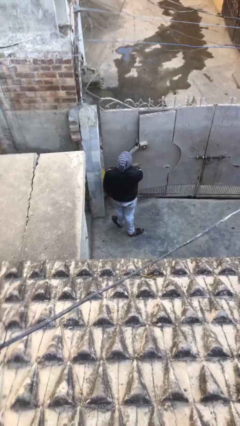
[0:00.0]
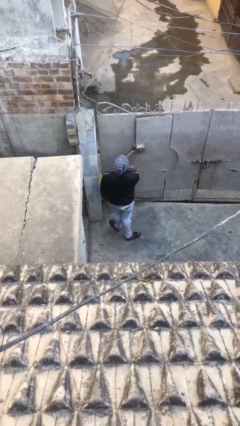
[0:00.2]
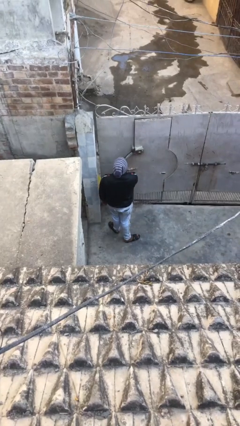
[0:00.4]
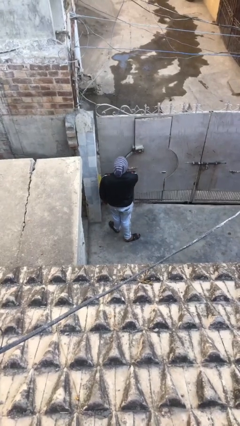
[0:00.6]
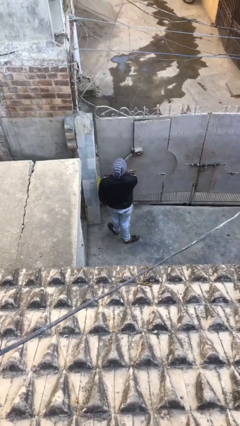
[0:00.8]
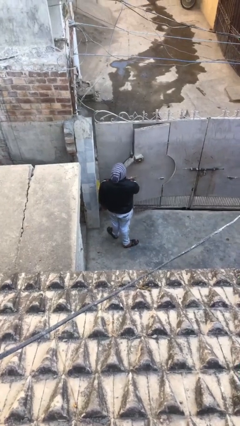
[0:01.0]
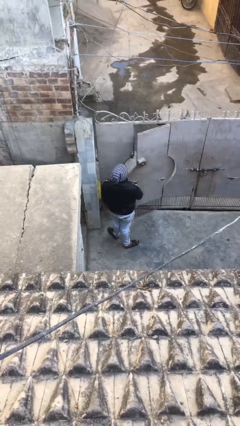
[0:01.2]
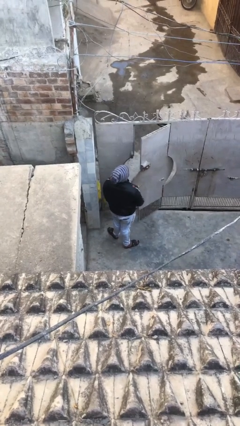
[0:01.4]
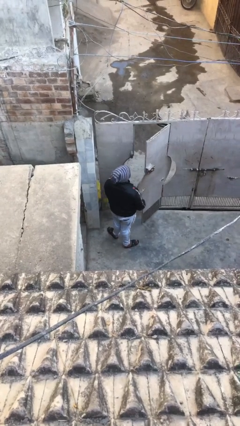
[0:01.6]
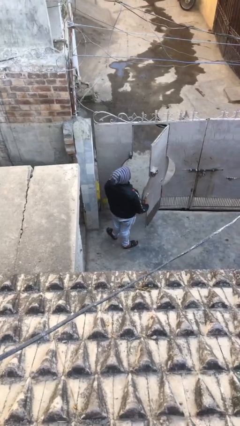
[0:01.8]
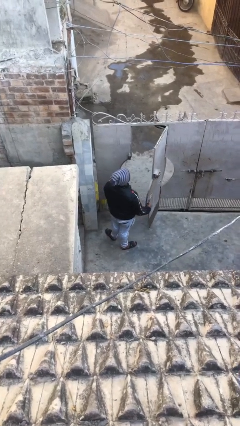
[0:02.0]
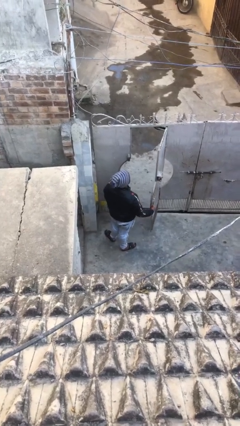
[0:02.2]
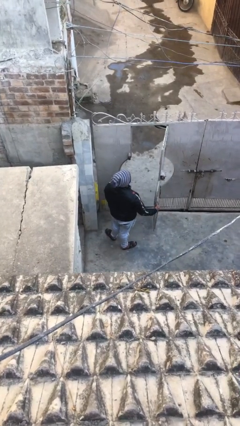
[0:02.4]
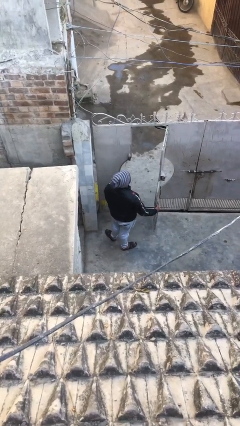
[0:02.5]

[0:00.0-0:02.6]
person opens facility door

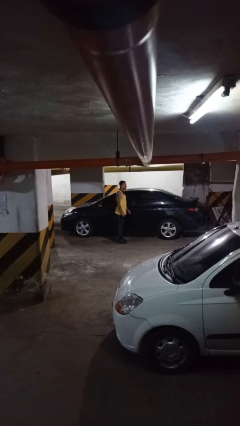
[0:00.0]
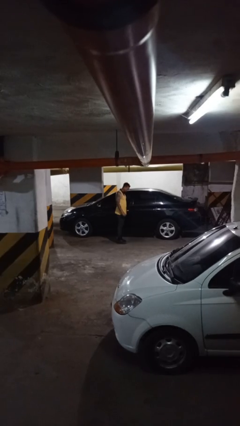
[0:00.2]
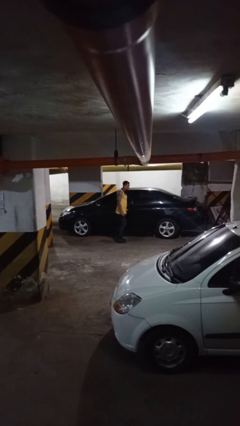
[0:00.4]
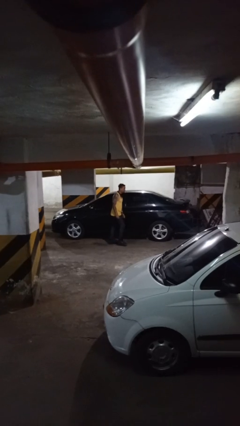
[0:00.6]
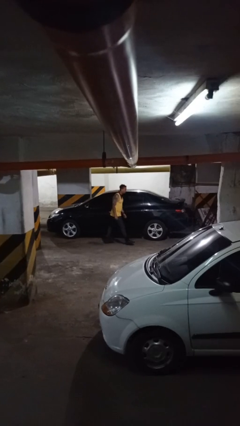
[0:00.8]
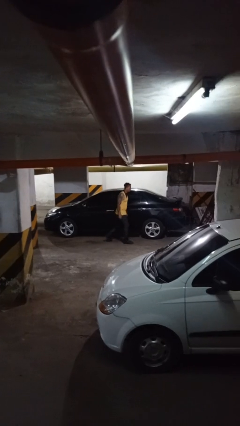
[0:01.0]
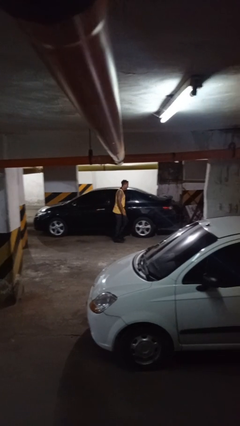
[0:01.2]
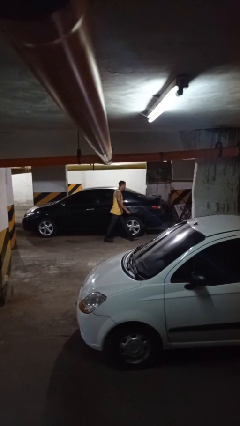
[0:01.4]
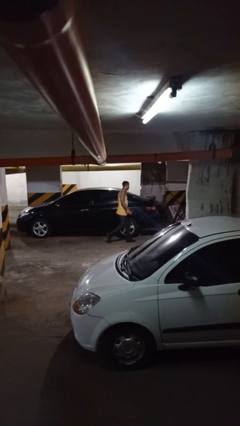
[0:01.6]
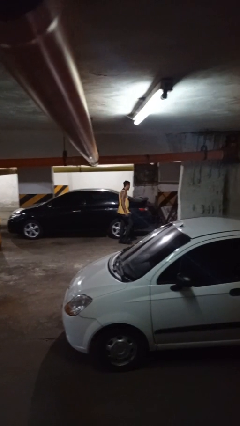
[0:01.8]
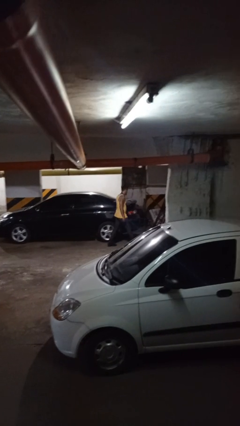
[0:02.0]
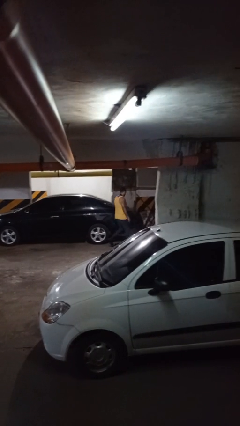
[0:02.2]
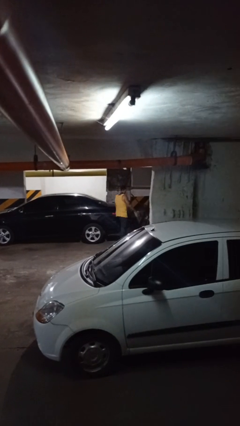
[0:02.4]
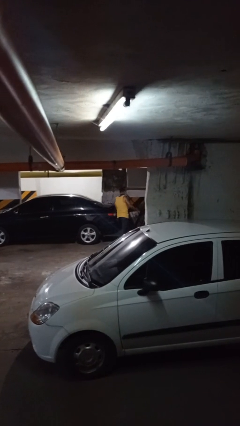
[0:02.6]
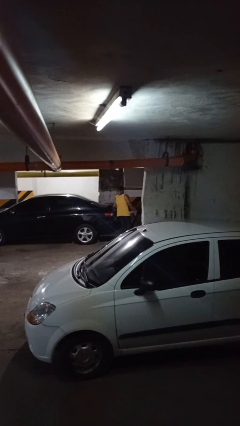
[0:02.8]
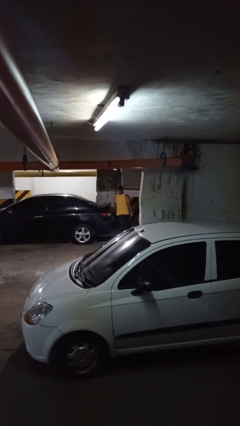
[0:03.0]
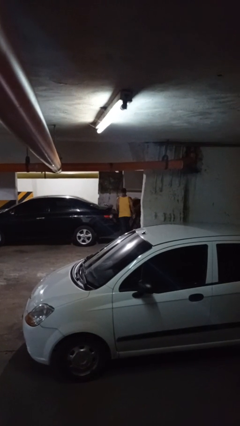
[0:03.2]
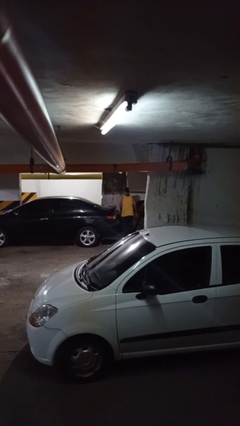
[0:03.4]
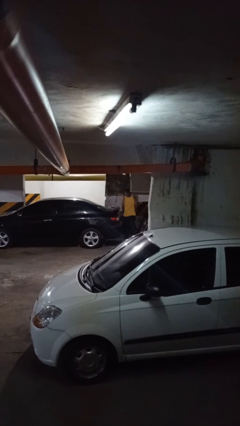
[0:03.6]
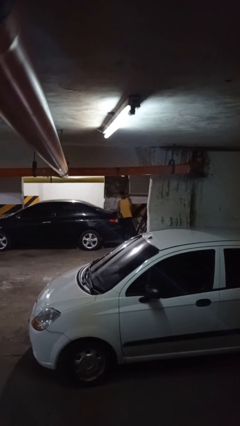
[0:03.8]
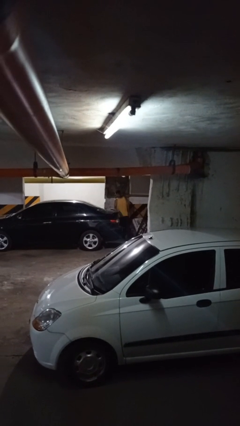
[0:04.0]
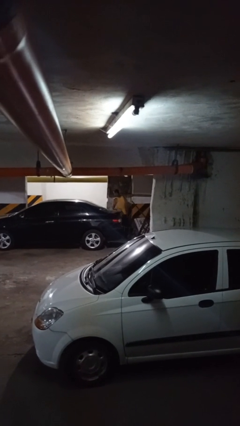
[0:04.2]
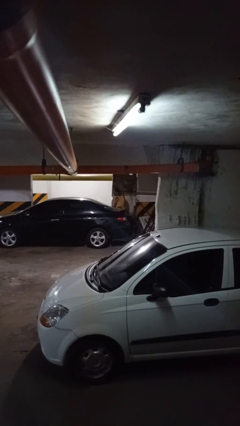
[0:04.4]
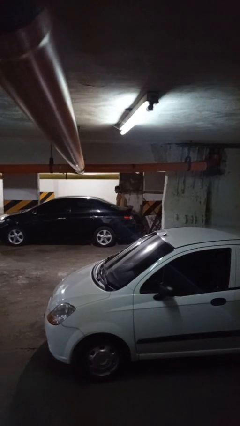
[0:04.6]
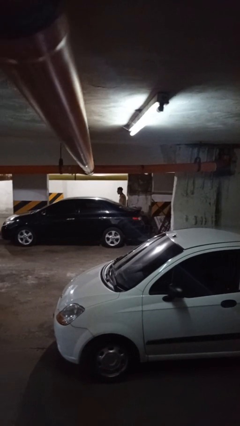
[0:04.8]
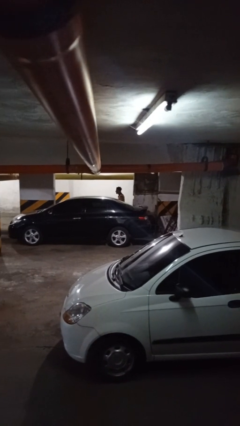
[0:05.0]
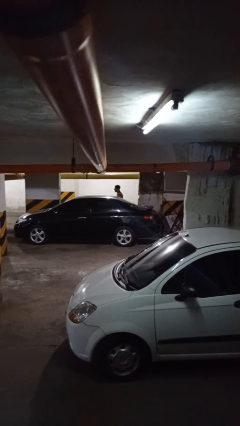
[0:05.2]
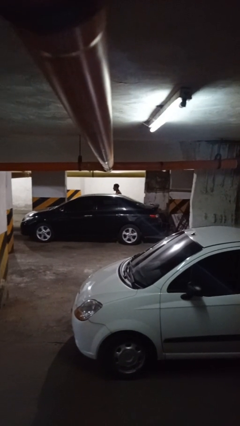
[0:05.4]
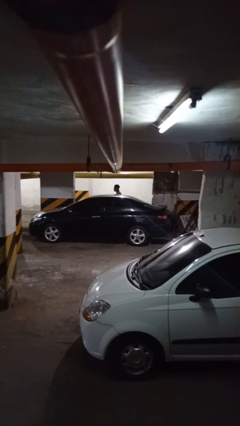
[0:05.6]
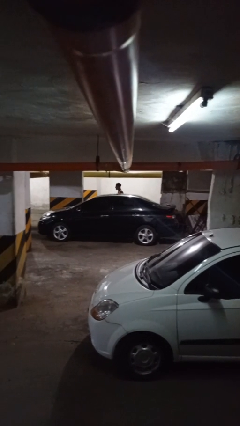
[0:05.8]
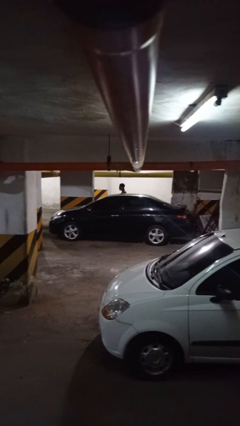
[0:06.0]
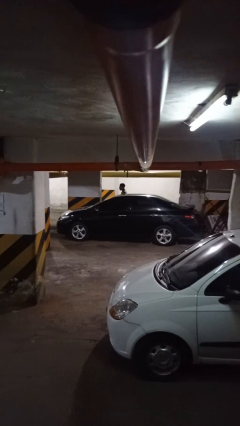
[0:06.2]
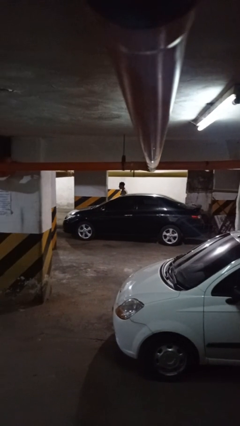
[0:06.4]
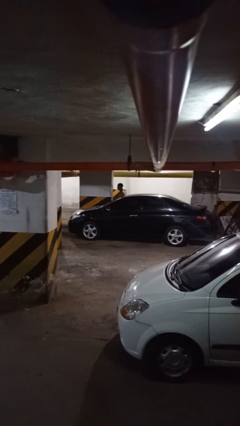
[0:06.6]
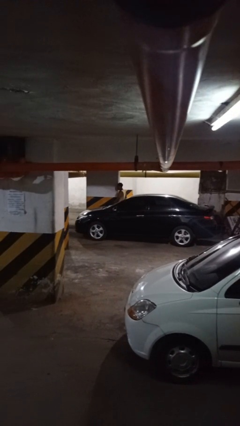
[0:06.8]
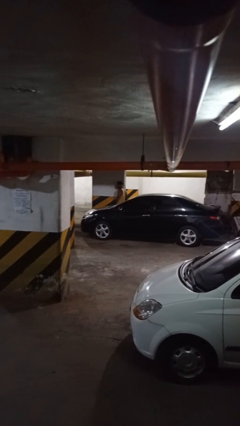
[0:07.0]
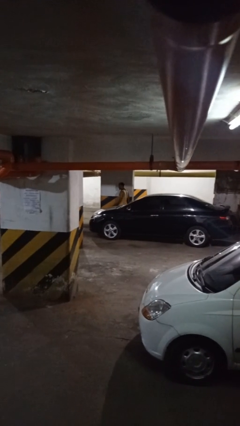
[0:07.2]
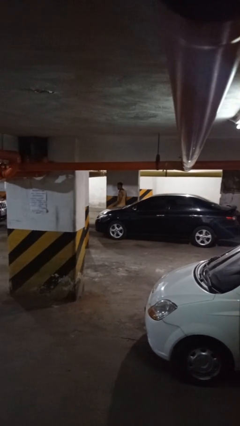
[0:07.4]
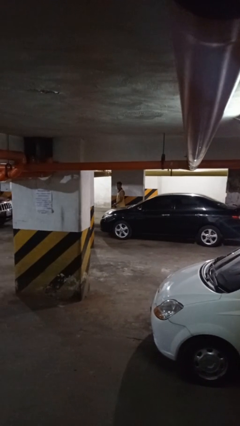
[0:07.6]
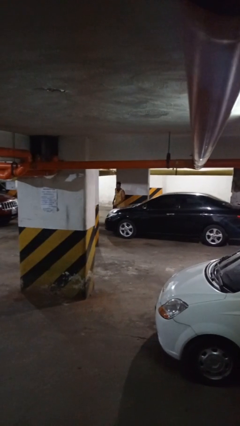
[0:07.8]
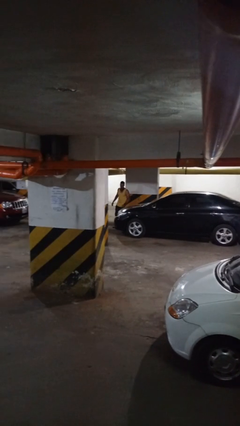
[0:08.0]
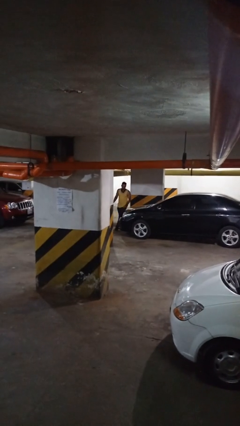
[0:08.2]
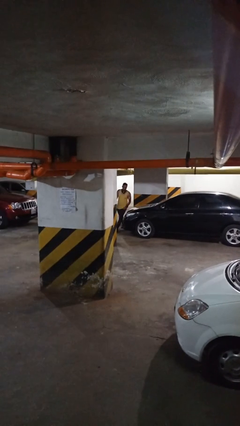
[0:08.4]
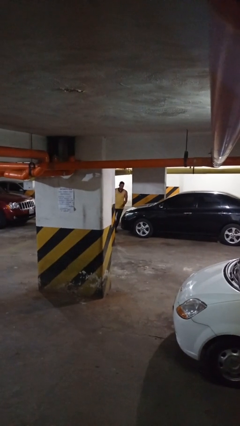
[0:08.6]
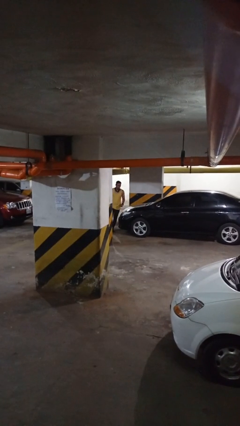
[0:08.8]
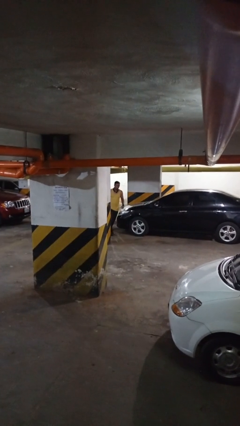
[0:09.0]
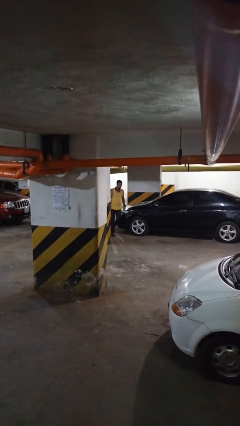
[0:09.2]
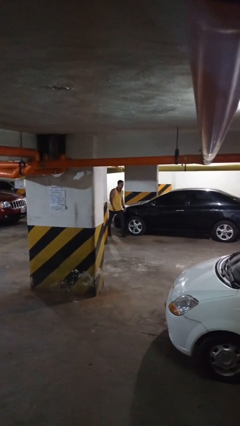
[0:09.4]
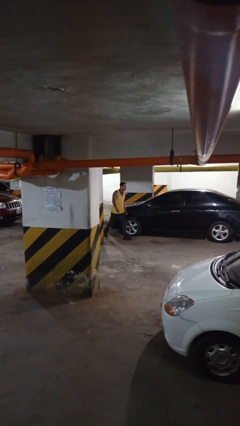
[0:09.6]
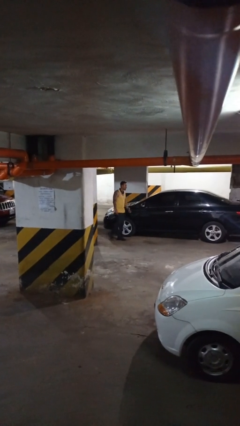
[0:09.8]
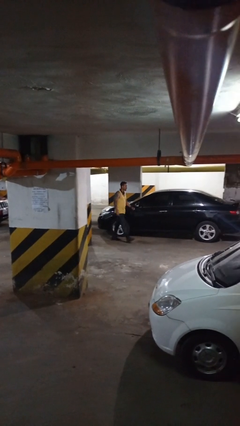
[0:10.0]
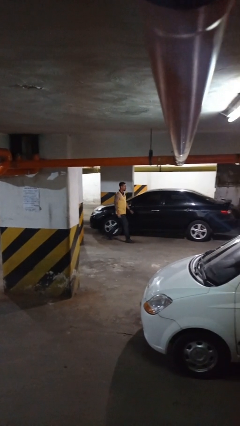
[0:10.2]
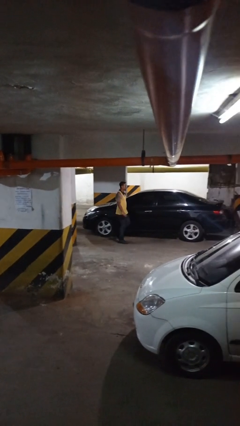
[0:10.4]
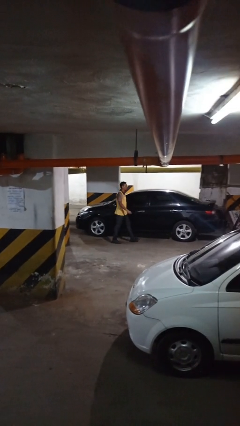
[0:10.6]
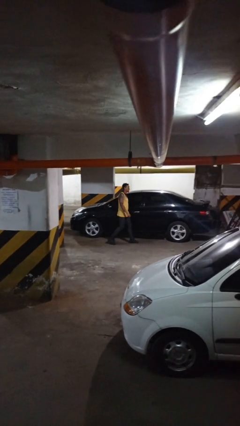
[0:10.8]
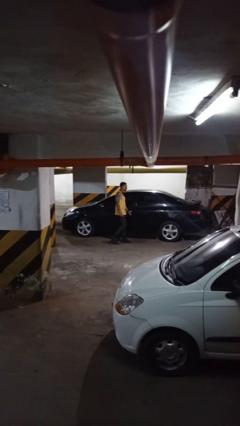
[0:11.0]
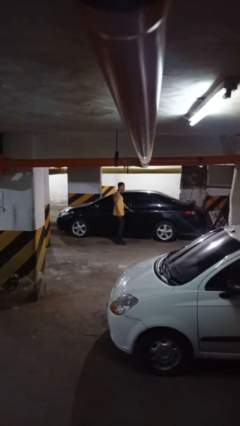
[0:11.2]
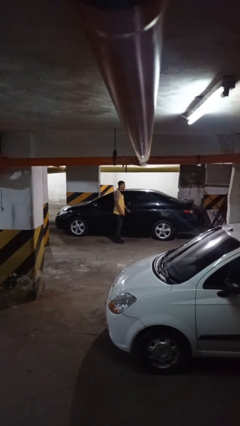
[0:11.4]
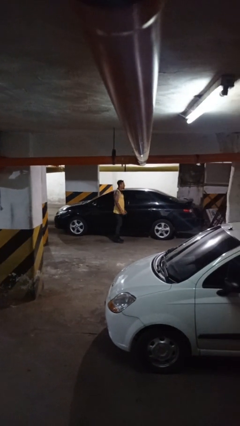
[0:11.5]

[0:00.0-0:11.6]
person walks around car

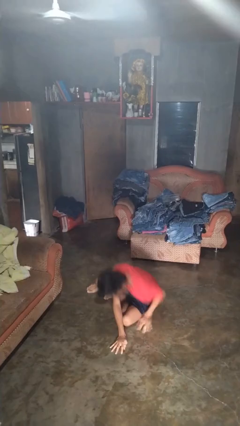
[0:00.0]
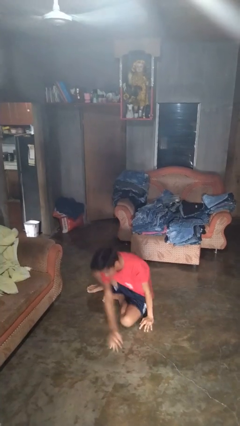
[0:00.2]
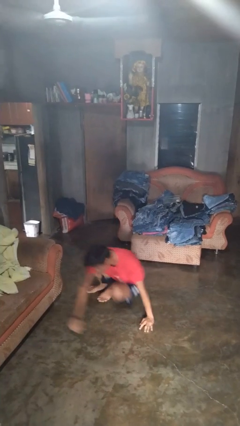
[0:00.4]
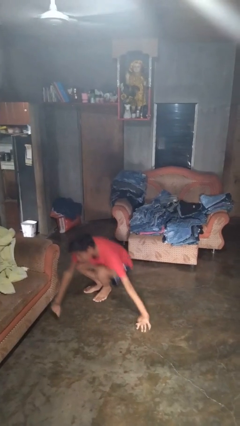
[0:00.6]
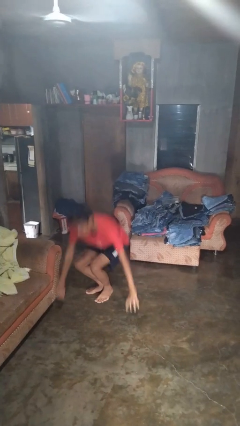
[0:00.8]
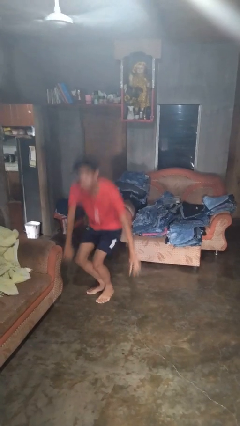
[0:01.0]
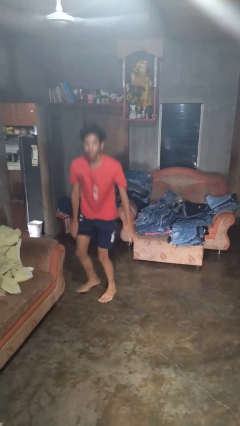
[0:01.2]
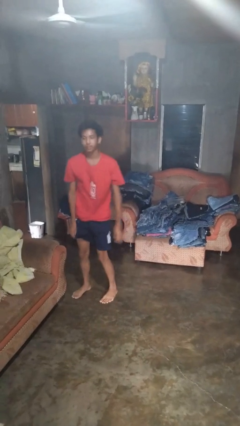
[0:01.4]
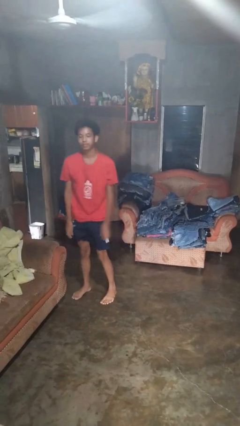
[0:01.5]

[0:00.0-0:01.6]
person stands up from floor

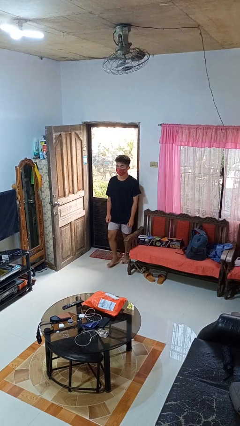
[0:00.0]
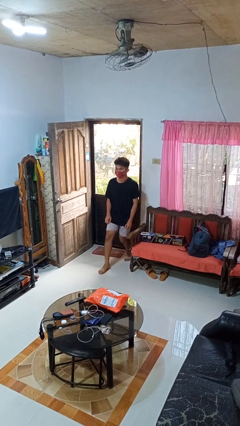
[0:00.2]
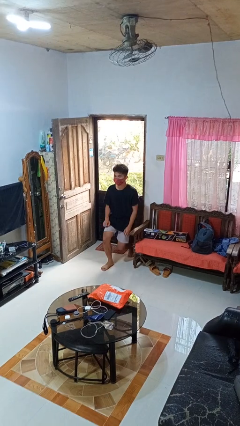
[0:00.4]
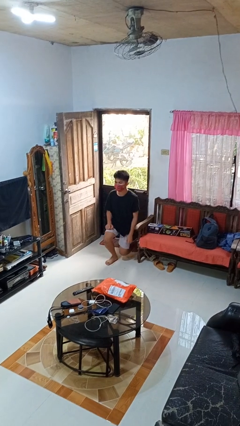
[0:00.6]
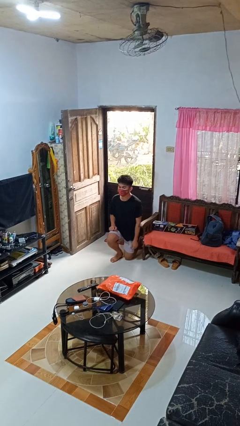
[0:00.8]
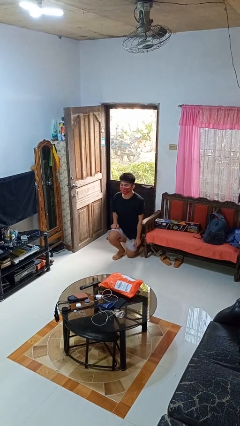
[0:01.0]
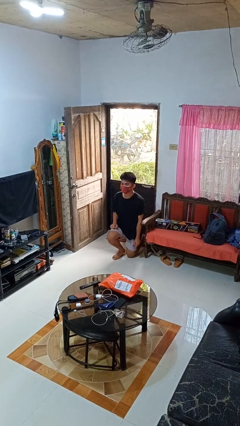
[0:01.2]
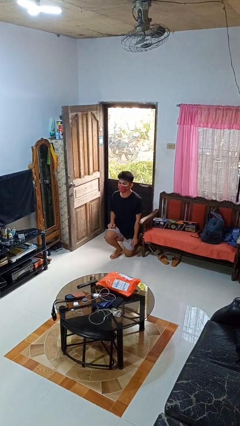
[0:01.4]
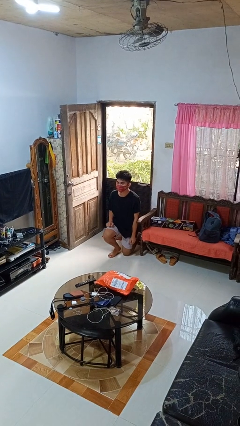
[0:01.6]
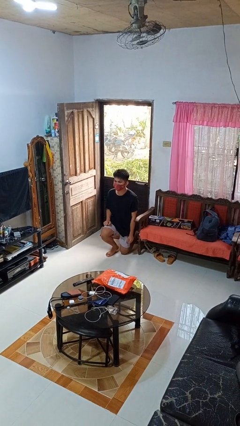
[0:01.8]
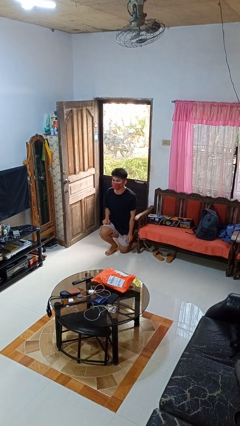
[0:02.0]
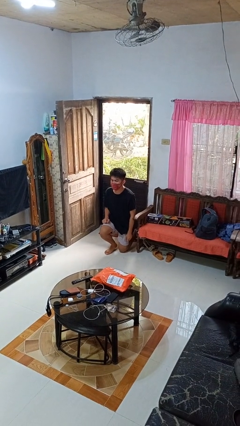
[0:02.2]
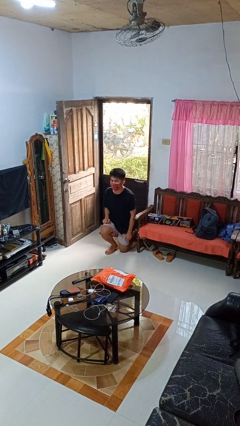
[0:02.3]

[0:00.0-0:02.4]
person kneels
